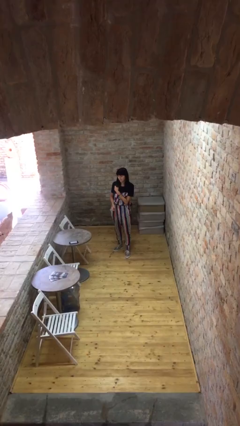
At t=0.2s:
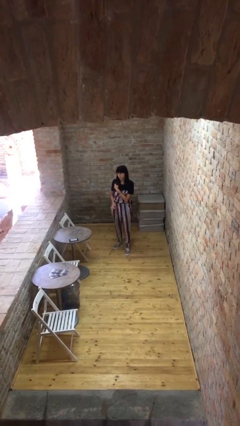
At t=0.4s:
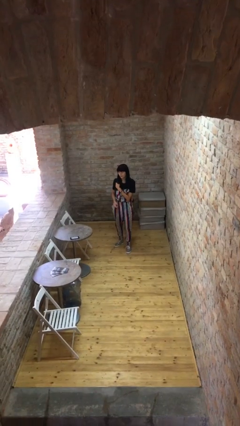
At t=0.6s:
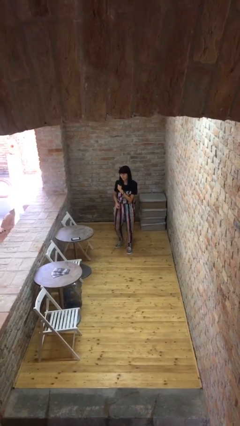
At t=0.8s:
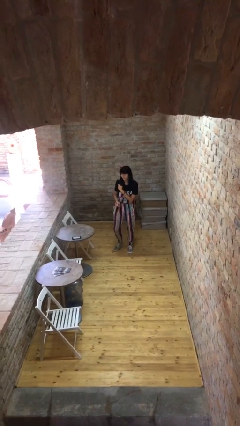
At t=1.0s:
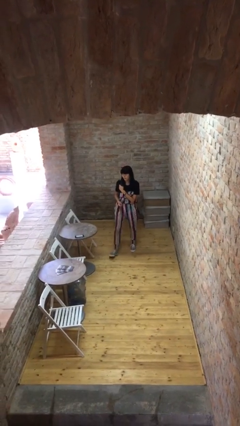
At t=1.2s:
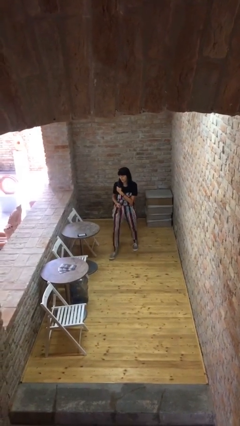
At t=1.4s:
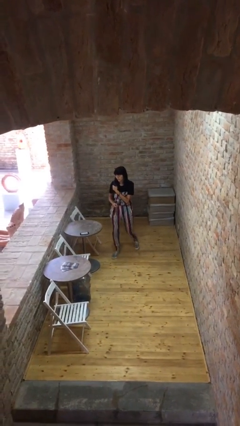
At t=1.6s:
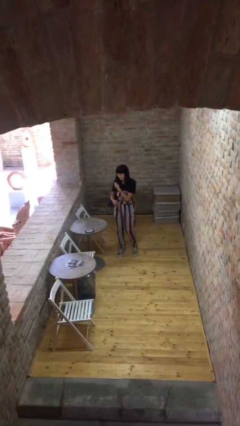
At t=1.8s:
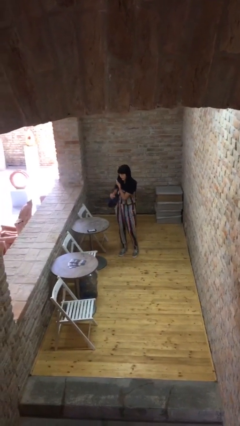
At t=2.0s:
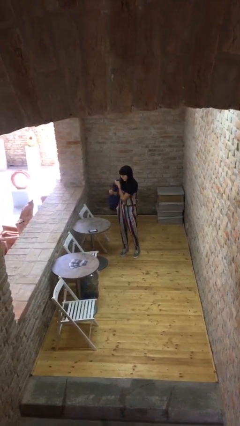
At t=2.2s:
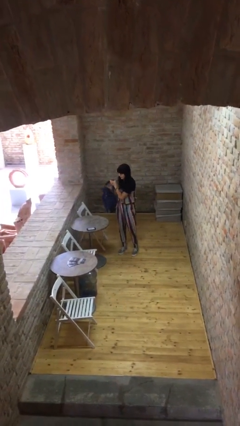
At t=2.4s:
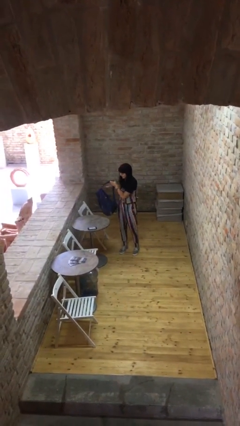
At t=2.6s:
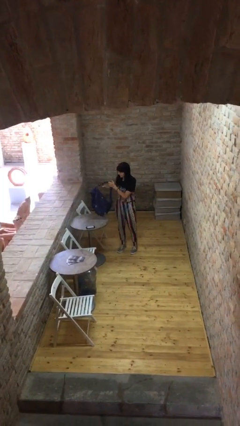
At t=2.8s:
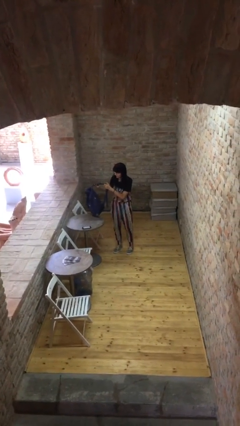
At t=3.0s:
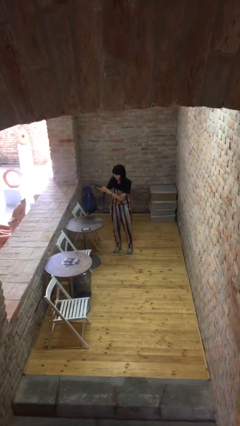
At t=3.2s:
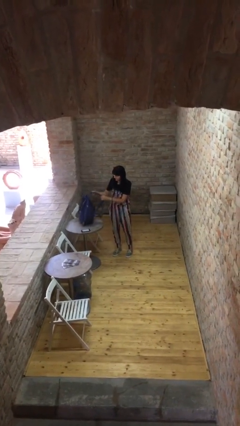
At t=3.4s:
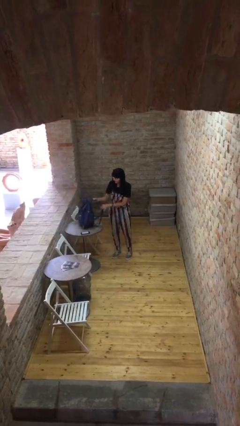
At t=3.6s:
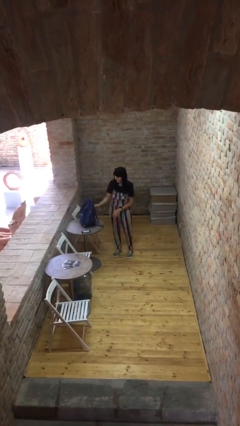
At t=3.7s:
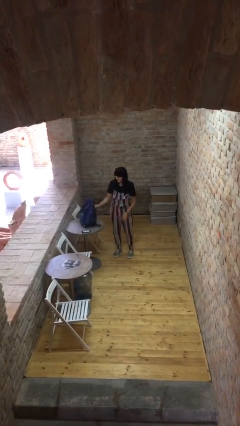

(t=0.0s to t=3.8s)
person puts down object on table

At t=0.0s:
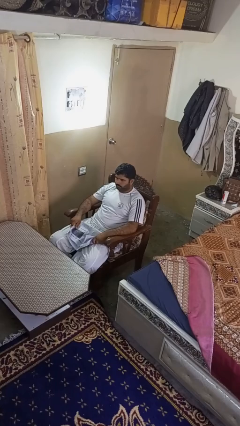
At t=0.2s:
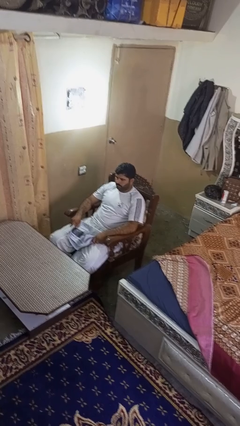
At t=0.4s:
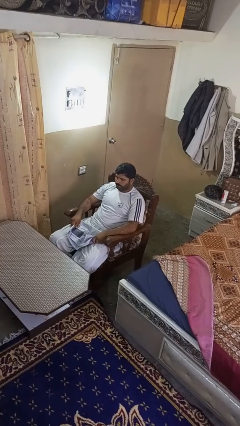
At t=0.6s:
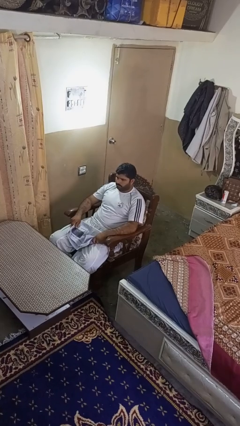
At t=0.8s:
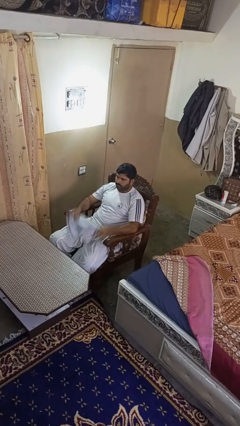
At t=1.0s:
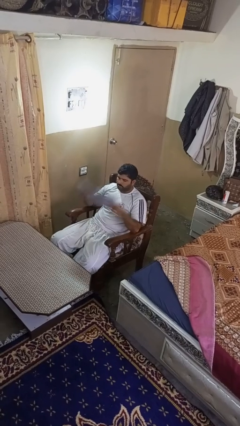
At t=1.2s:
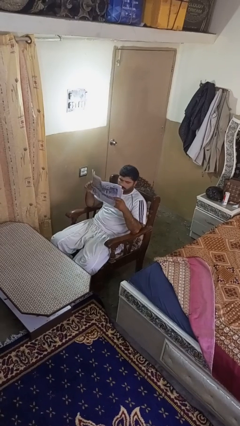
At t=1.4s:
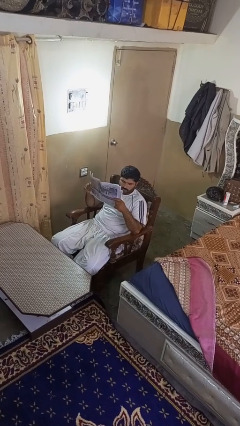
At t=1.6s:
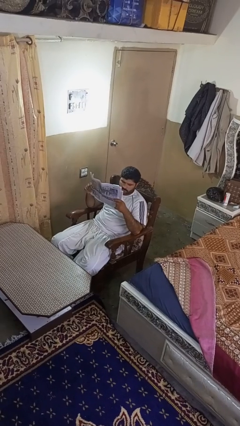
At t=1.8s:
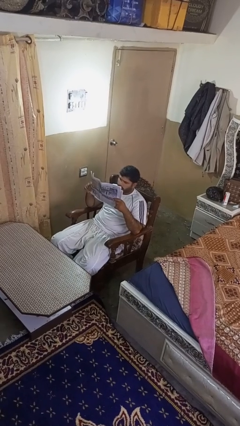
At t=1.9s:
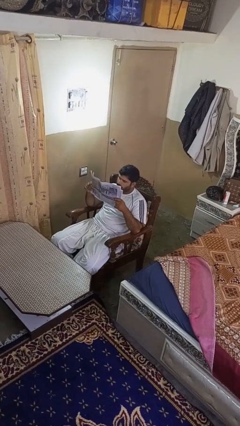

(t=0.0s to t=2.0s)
person reads newspaper

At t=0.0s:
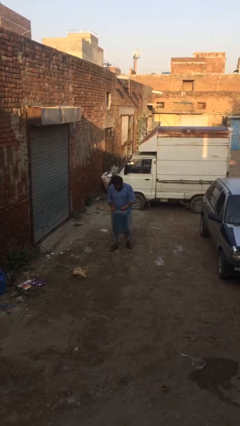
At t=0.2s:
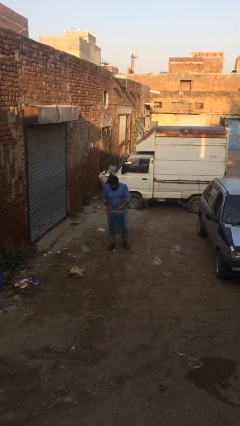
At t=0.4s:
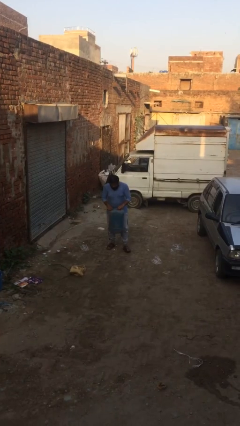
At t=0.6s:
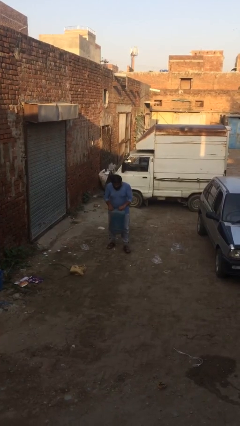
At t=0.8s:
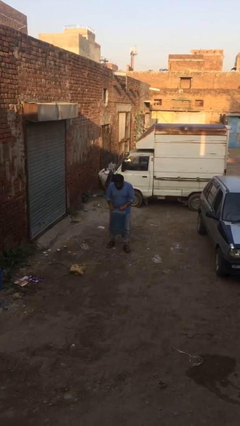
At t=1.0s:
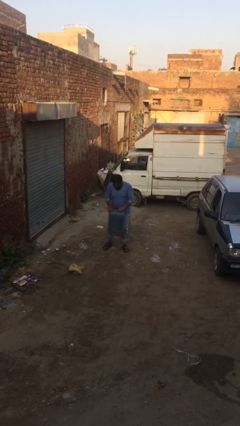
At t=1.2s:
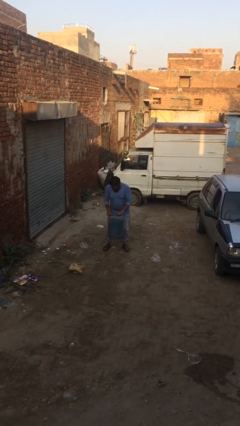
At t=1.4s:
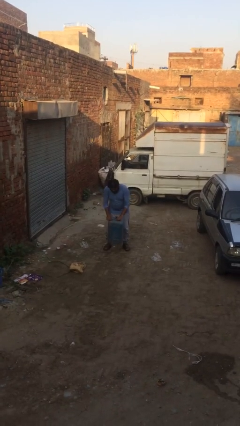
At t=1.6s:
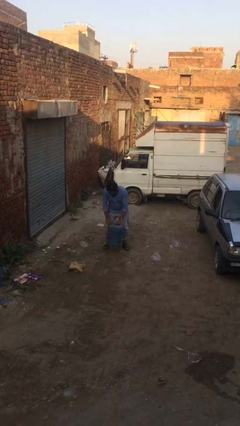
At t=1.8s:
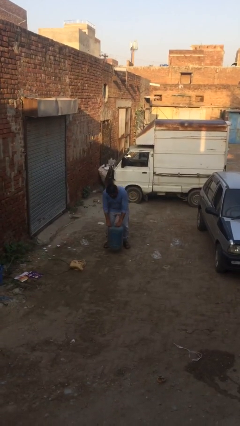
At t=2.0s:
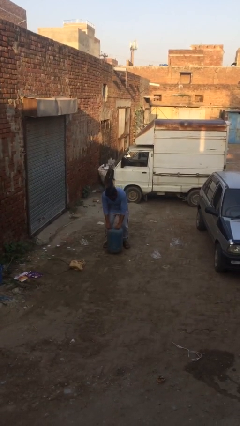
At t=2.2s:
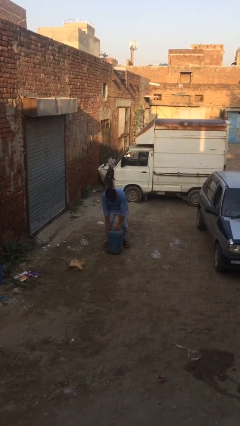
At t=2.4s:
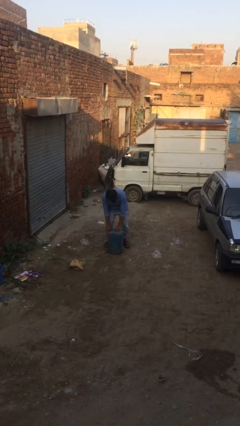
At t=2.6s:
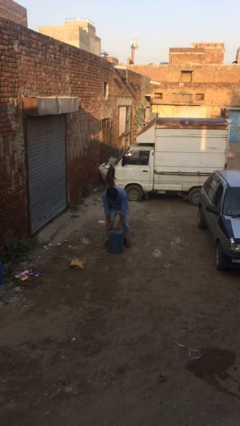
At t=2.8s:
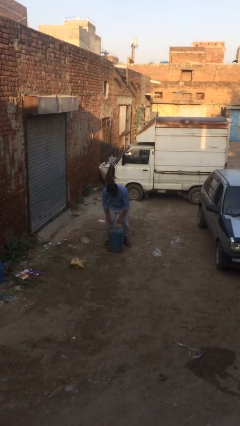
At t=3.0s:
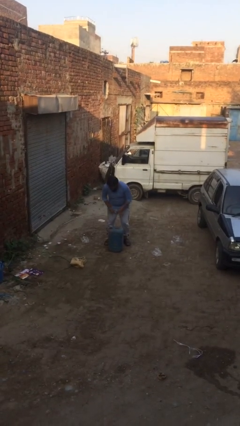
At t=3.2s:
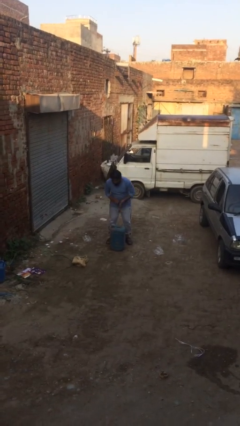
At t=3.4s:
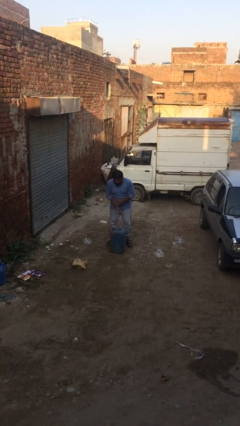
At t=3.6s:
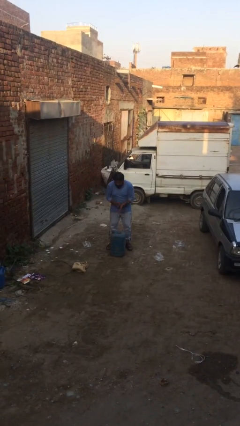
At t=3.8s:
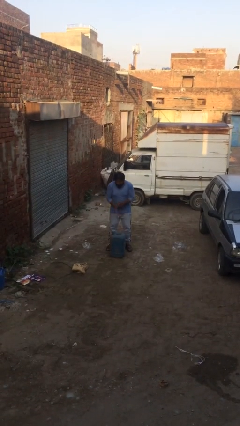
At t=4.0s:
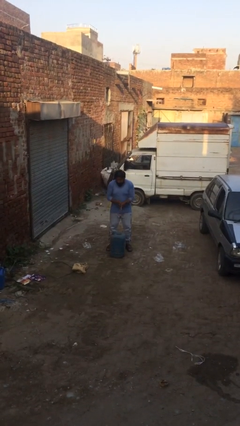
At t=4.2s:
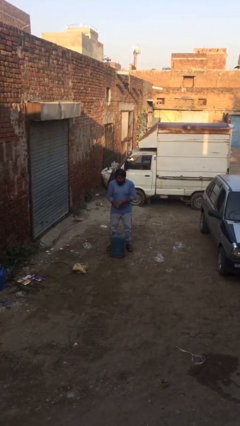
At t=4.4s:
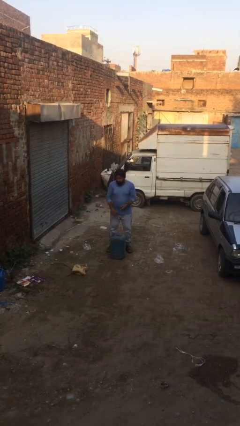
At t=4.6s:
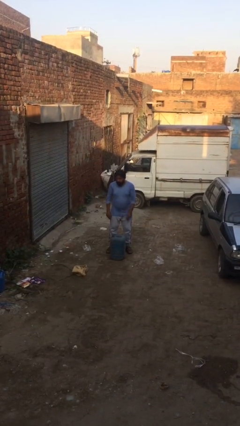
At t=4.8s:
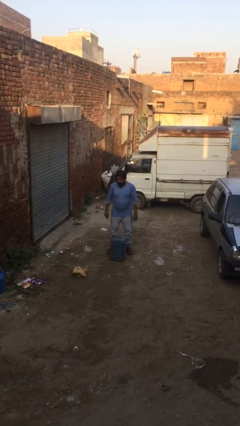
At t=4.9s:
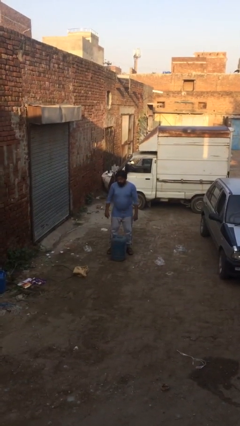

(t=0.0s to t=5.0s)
person puts down object on floor

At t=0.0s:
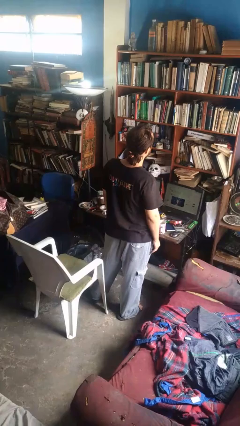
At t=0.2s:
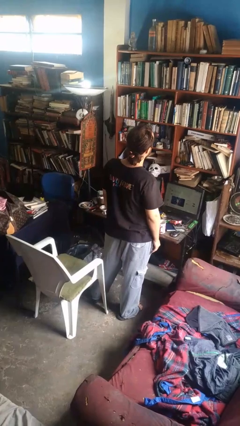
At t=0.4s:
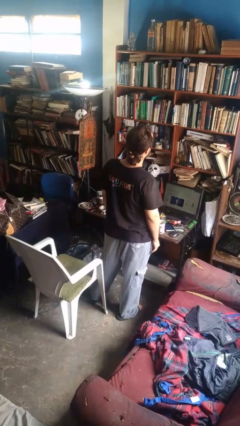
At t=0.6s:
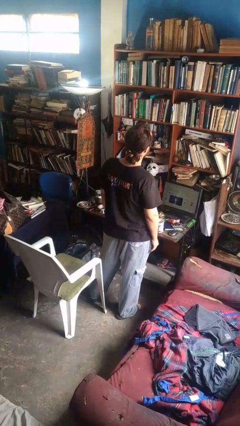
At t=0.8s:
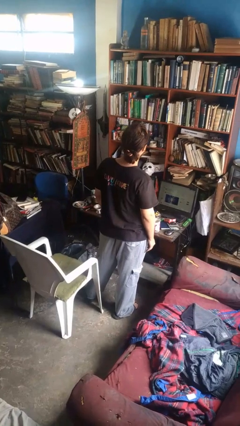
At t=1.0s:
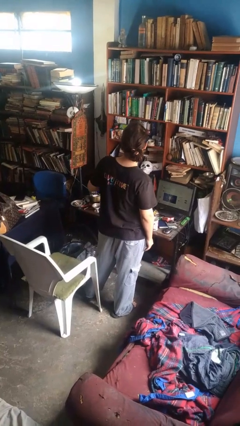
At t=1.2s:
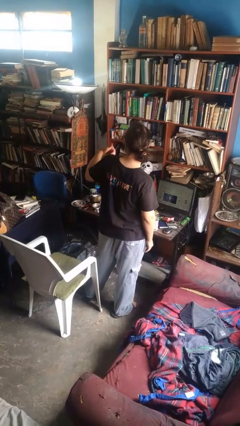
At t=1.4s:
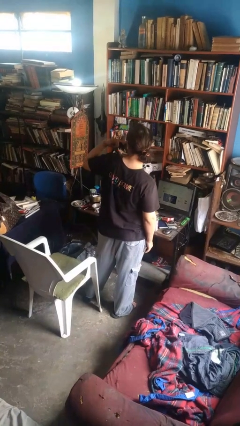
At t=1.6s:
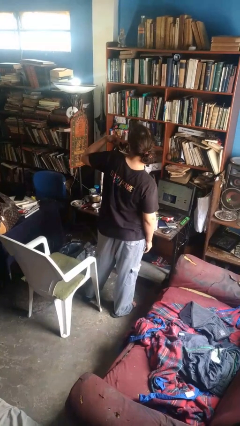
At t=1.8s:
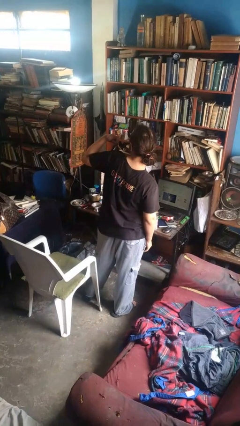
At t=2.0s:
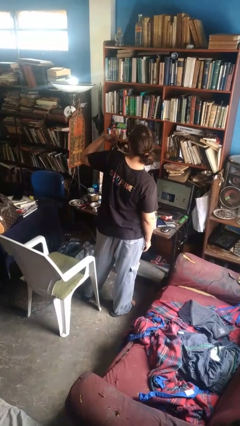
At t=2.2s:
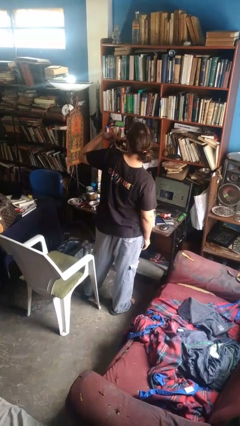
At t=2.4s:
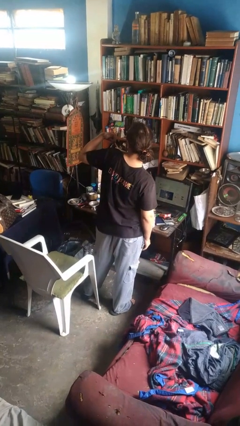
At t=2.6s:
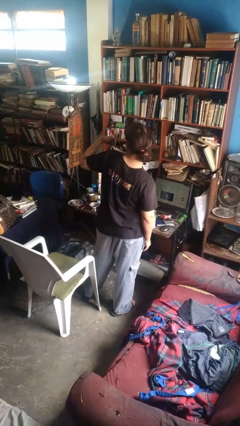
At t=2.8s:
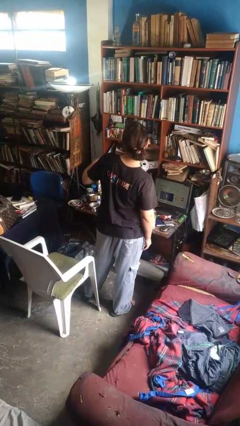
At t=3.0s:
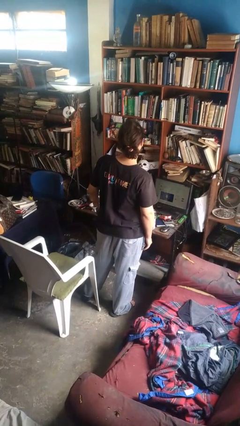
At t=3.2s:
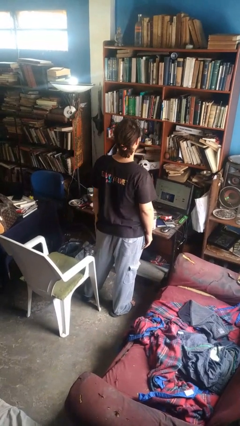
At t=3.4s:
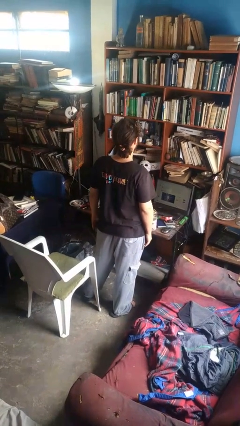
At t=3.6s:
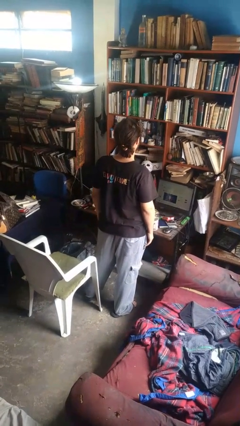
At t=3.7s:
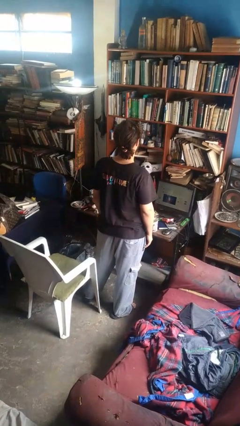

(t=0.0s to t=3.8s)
person gestures call me

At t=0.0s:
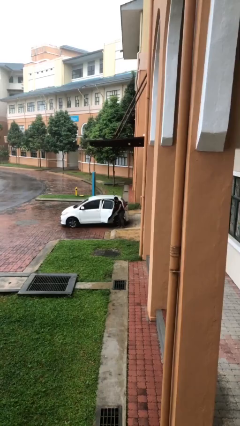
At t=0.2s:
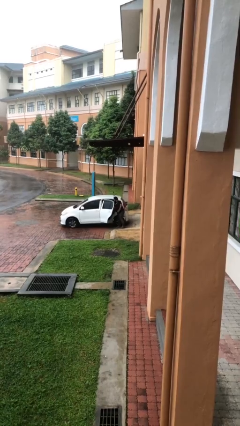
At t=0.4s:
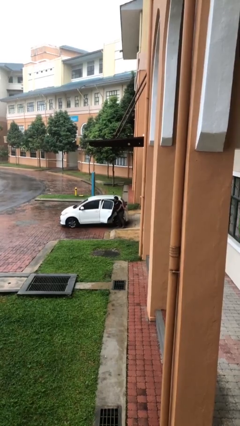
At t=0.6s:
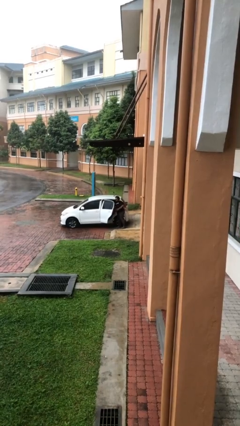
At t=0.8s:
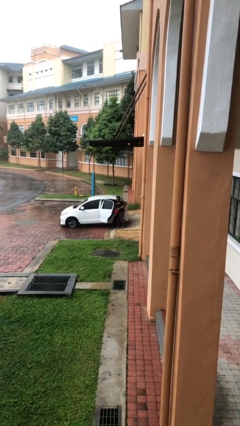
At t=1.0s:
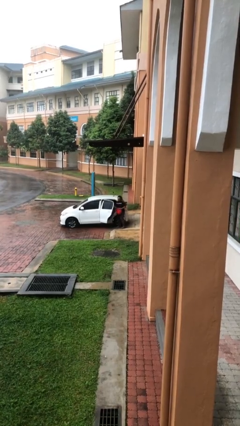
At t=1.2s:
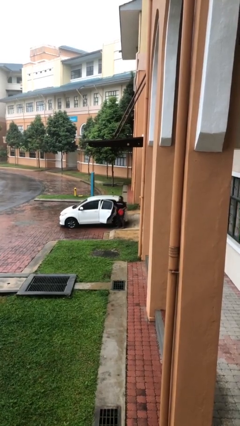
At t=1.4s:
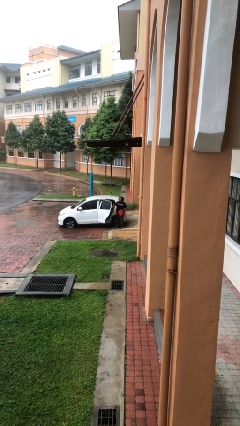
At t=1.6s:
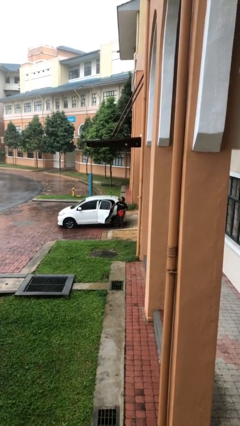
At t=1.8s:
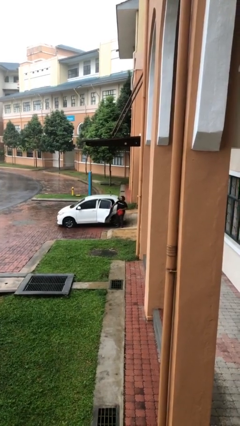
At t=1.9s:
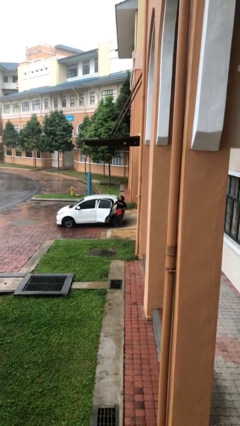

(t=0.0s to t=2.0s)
person unloads car

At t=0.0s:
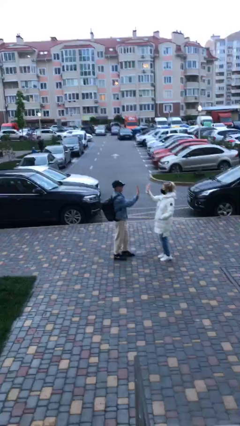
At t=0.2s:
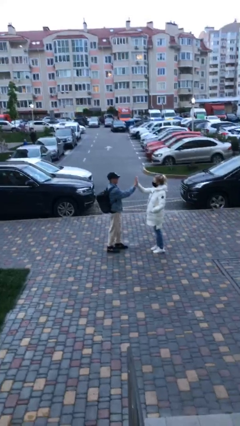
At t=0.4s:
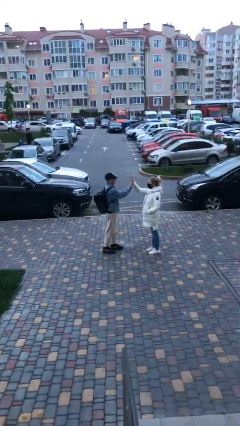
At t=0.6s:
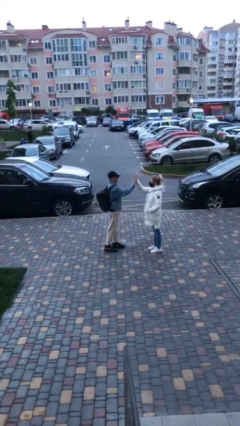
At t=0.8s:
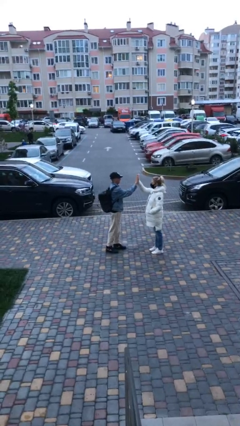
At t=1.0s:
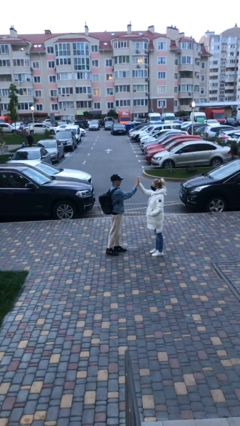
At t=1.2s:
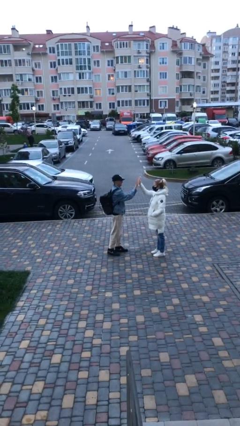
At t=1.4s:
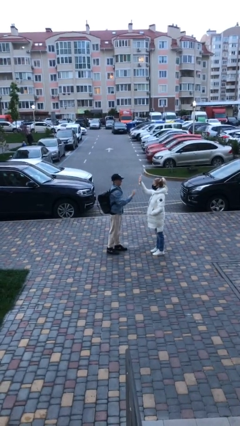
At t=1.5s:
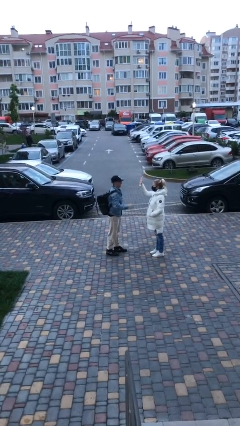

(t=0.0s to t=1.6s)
person highfives hand
